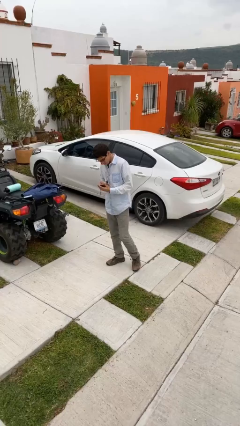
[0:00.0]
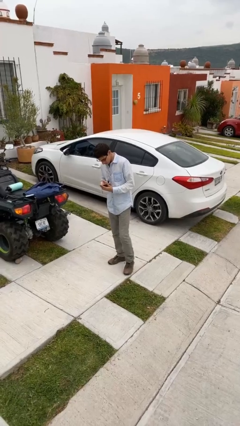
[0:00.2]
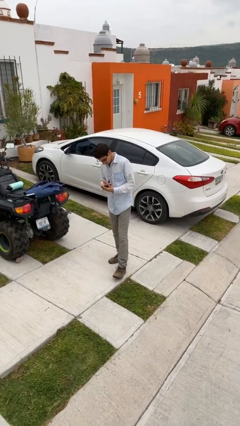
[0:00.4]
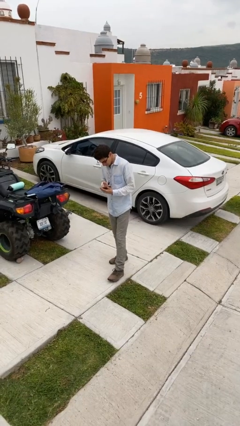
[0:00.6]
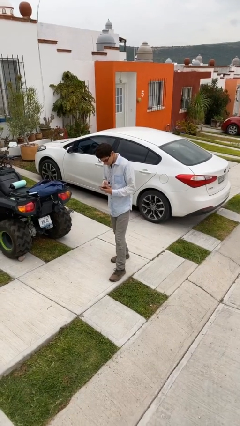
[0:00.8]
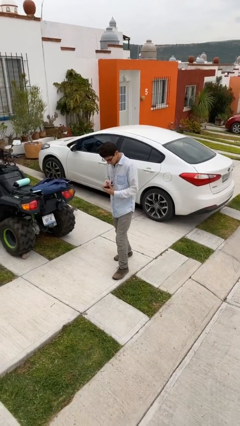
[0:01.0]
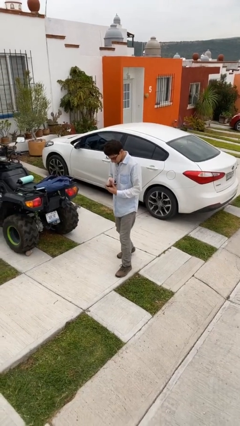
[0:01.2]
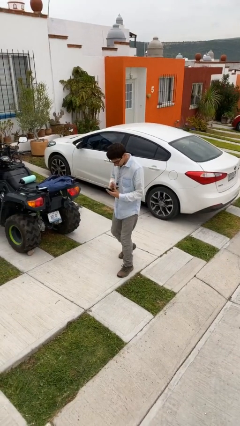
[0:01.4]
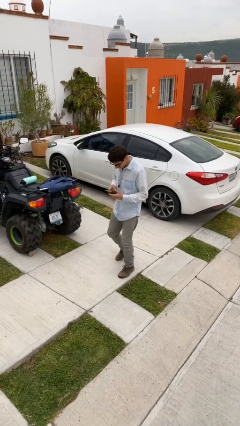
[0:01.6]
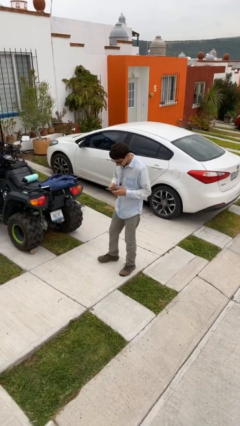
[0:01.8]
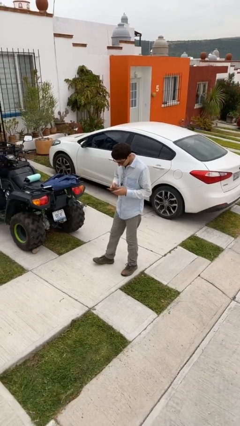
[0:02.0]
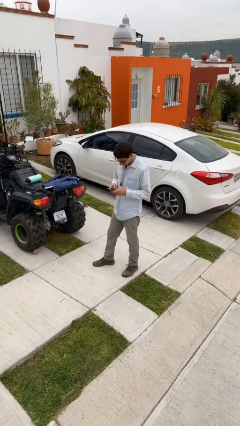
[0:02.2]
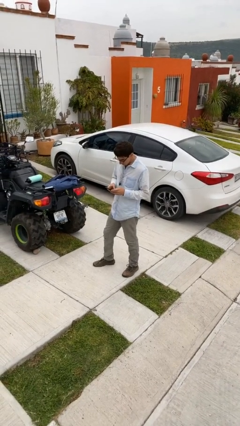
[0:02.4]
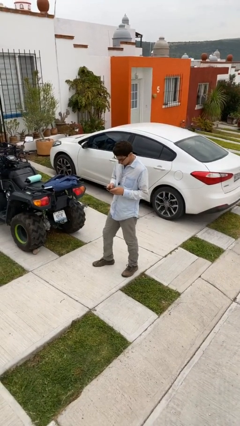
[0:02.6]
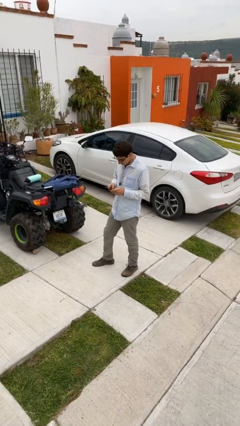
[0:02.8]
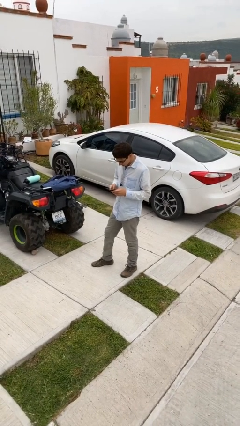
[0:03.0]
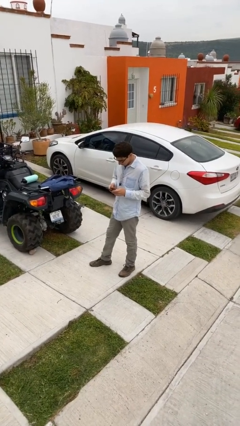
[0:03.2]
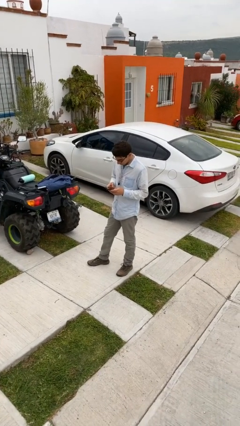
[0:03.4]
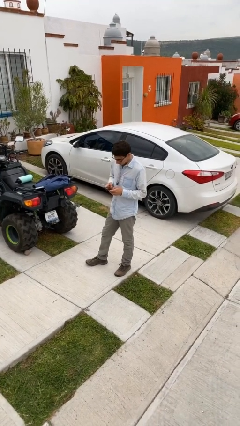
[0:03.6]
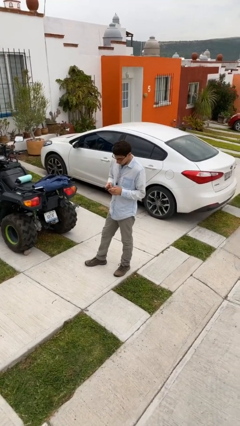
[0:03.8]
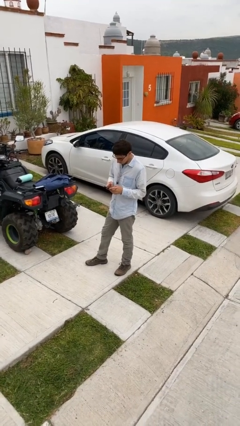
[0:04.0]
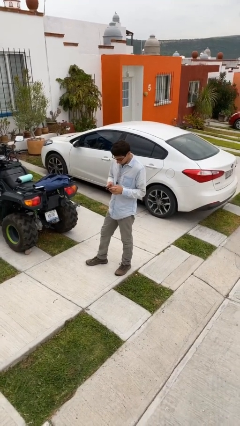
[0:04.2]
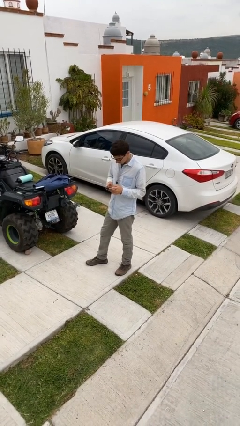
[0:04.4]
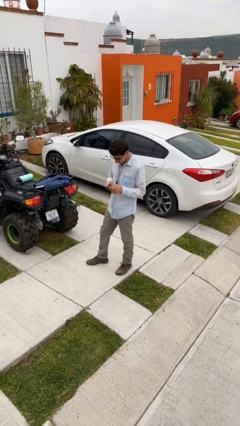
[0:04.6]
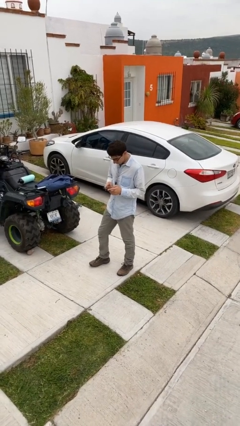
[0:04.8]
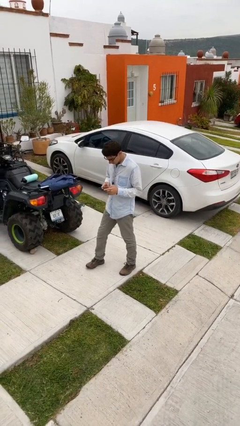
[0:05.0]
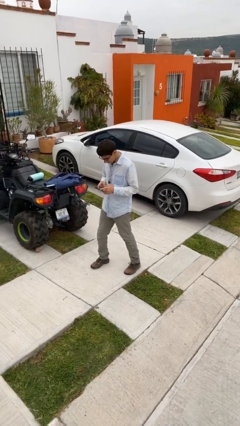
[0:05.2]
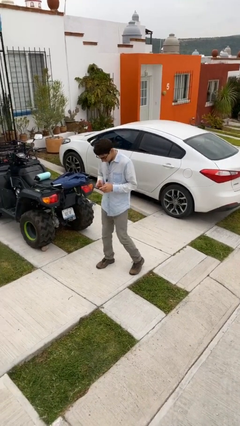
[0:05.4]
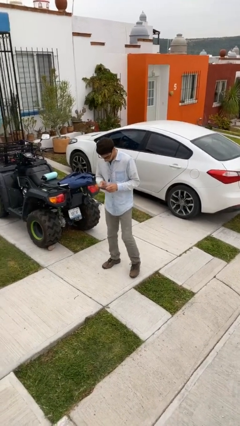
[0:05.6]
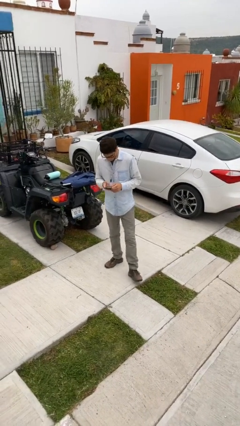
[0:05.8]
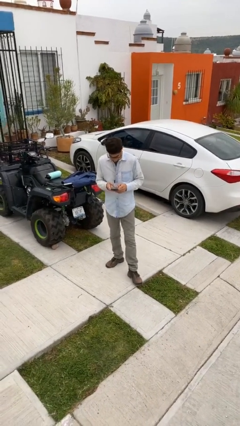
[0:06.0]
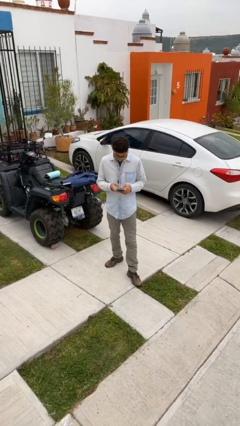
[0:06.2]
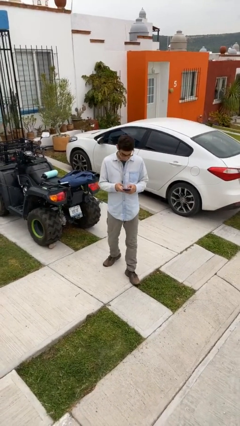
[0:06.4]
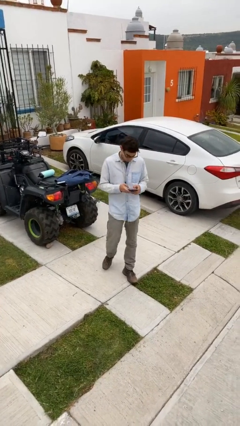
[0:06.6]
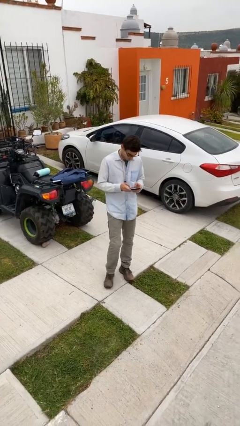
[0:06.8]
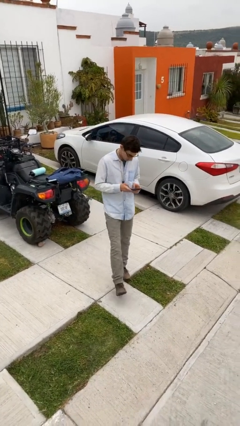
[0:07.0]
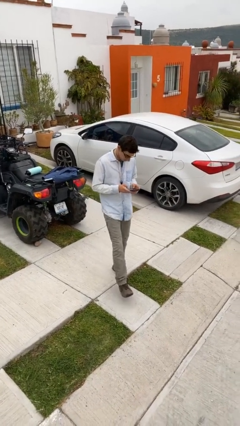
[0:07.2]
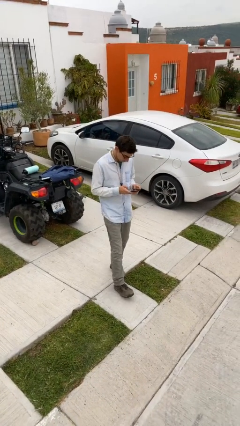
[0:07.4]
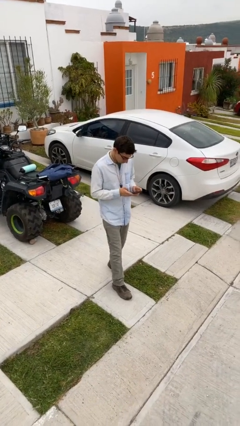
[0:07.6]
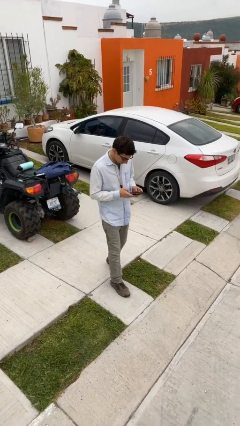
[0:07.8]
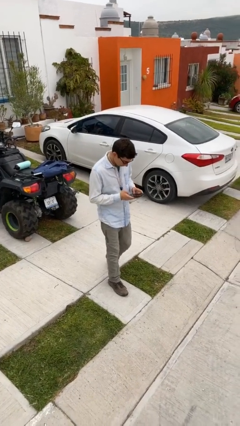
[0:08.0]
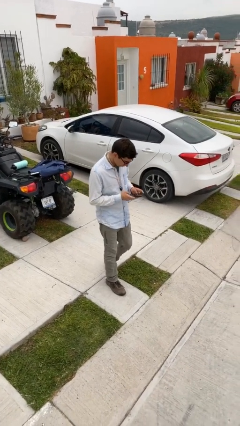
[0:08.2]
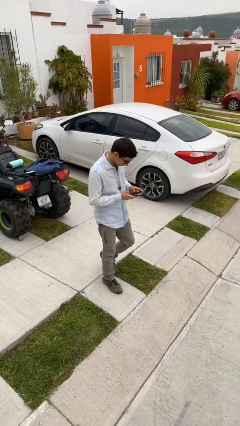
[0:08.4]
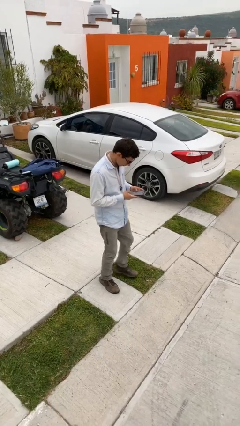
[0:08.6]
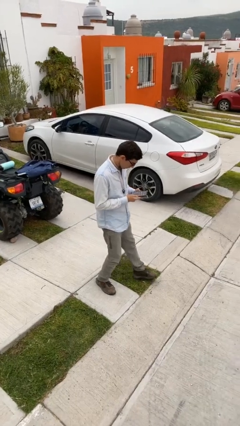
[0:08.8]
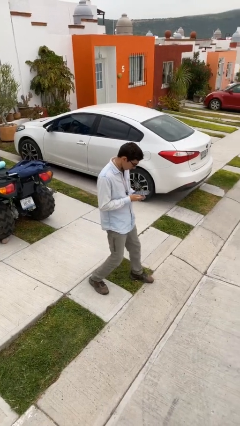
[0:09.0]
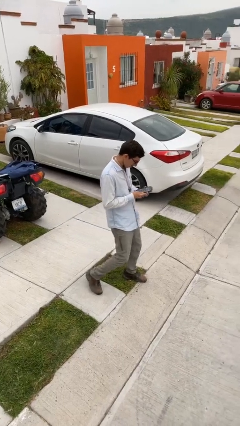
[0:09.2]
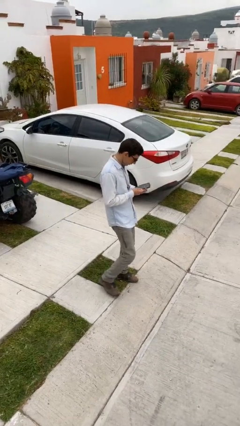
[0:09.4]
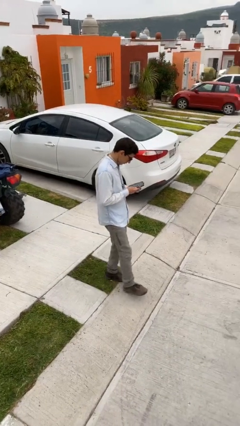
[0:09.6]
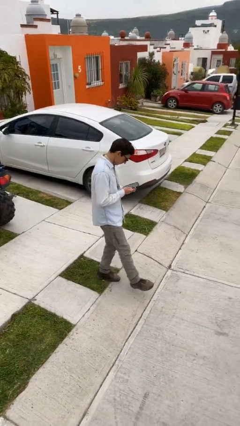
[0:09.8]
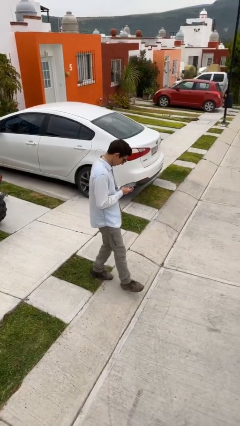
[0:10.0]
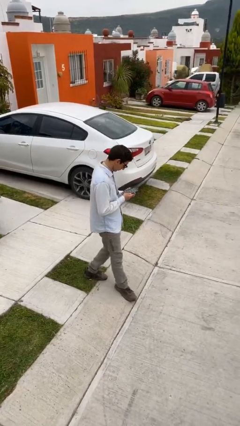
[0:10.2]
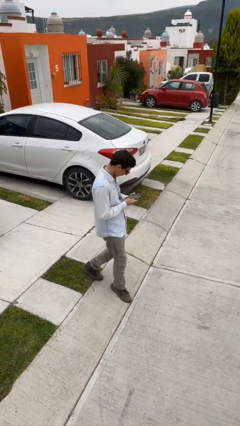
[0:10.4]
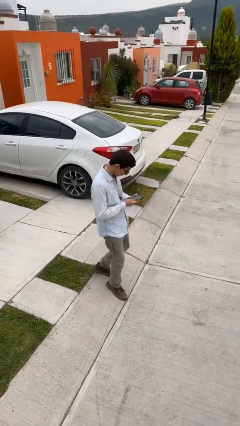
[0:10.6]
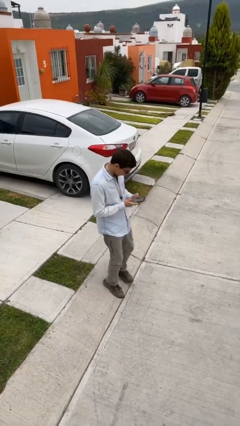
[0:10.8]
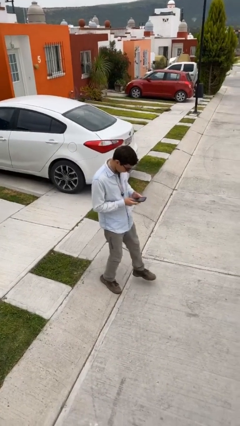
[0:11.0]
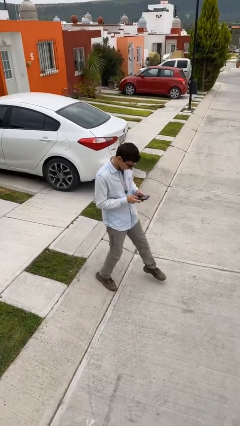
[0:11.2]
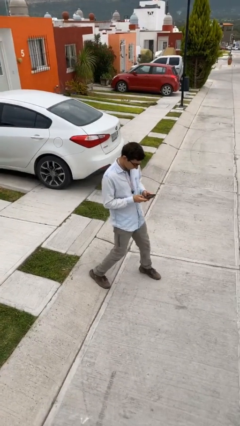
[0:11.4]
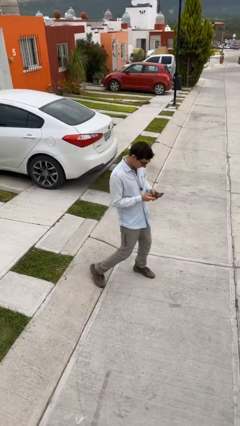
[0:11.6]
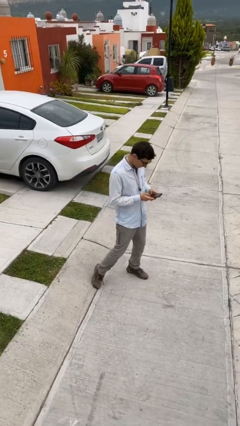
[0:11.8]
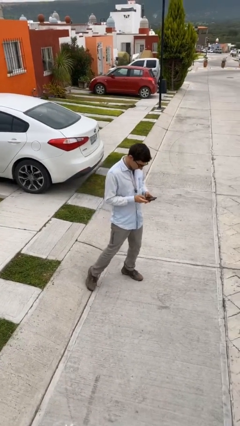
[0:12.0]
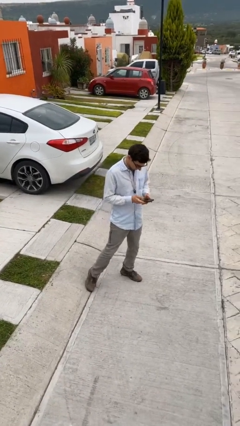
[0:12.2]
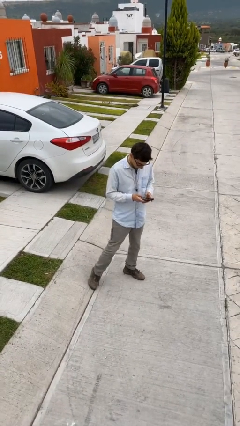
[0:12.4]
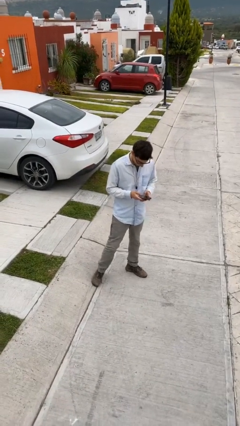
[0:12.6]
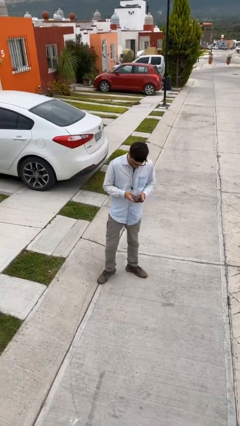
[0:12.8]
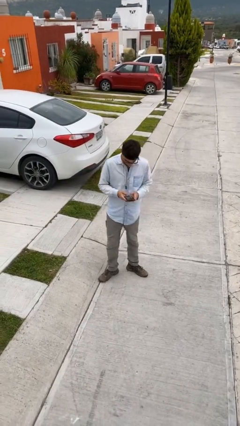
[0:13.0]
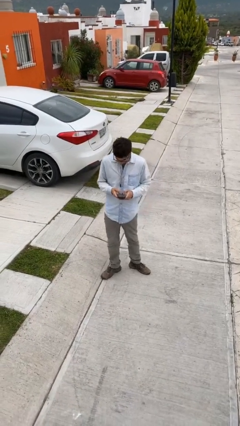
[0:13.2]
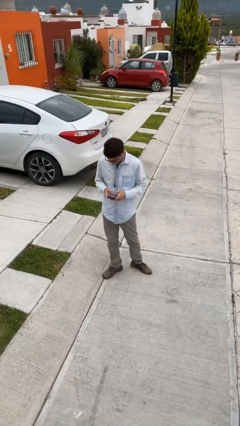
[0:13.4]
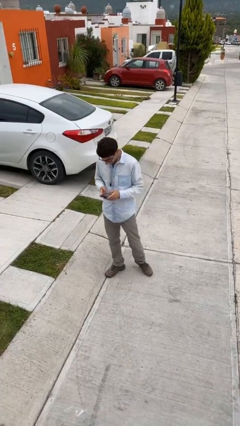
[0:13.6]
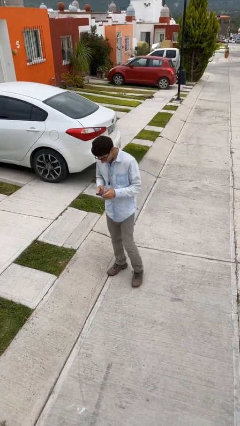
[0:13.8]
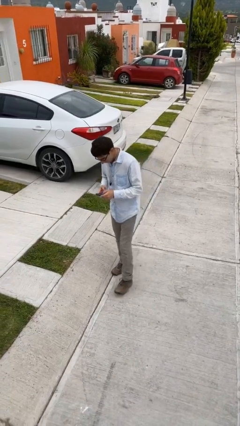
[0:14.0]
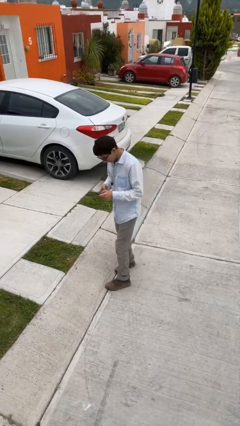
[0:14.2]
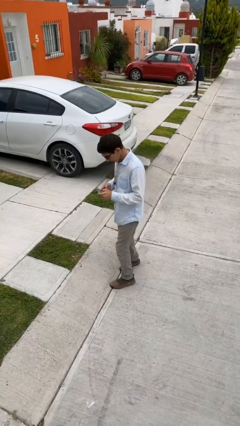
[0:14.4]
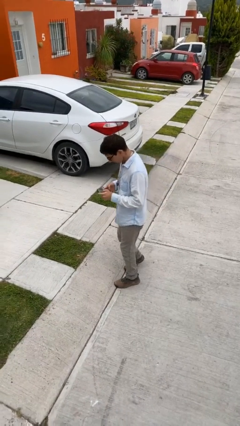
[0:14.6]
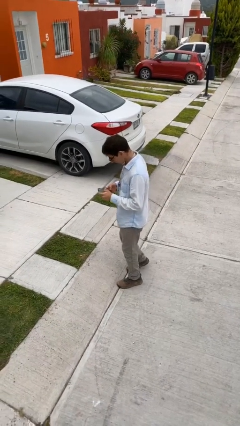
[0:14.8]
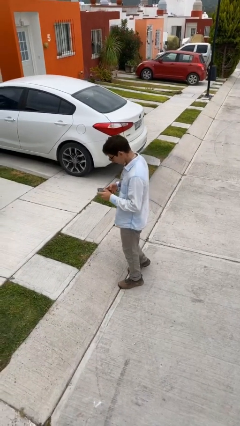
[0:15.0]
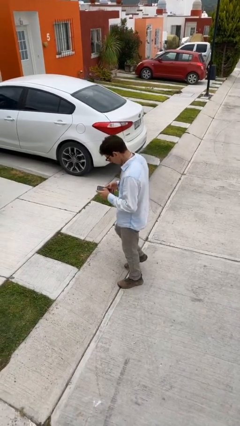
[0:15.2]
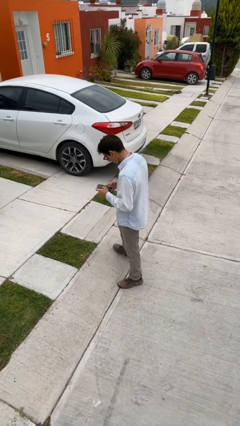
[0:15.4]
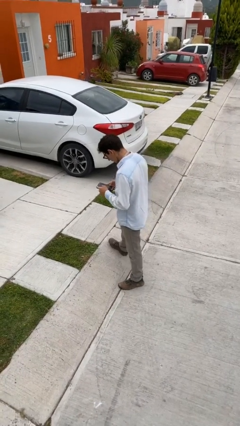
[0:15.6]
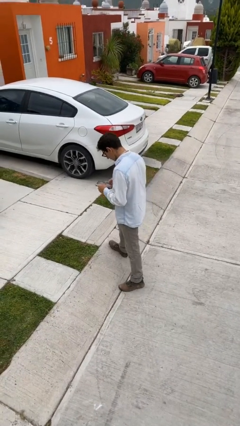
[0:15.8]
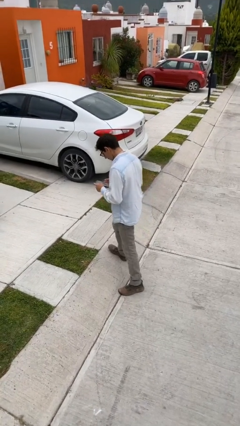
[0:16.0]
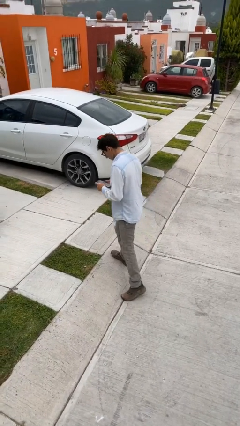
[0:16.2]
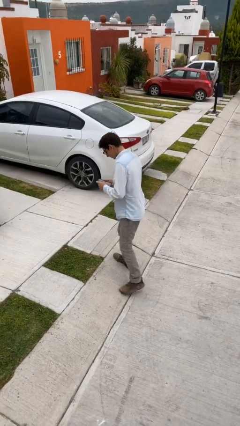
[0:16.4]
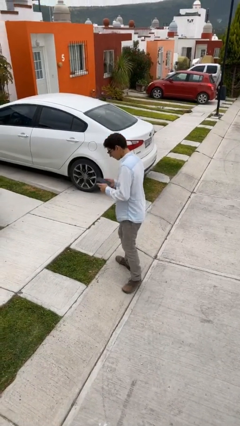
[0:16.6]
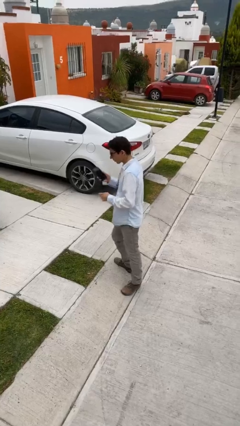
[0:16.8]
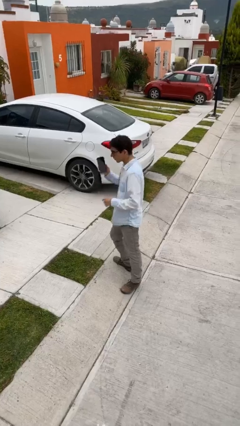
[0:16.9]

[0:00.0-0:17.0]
person texts on phone

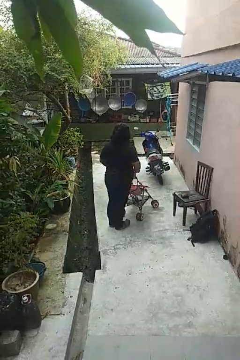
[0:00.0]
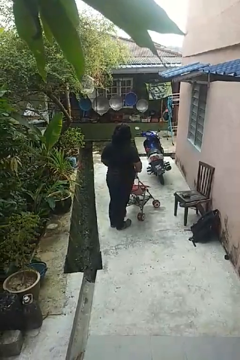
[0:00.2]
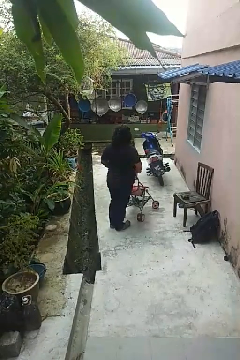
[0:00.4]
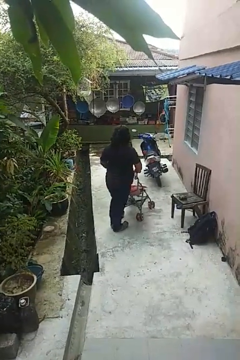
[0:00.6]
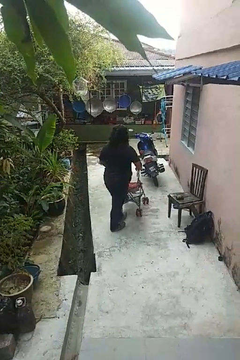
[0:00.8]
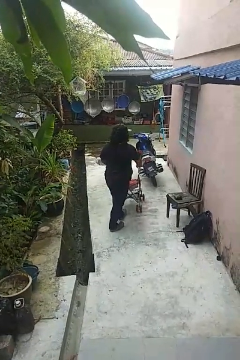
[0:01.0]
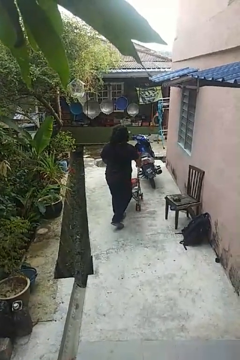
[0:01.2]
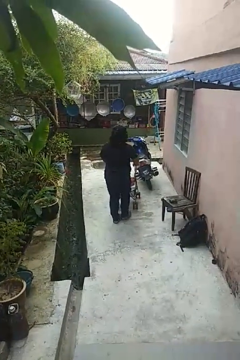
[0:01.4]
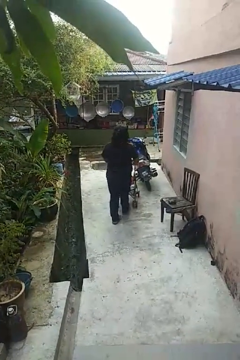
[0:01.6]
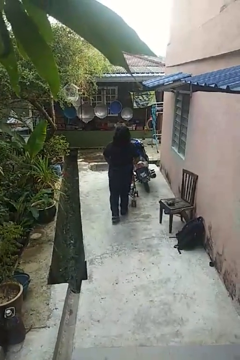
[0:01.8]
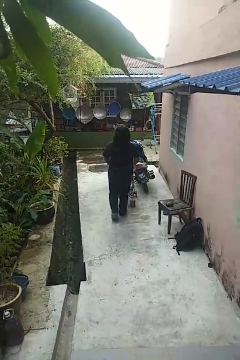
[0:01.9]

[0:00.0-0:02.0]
person pushes wheeled cart

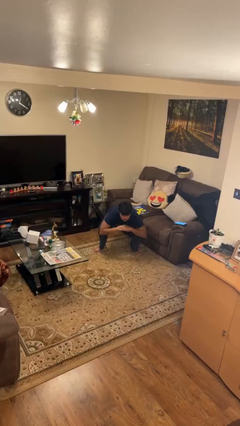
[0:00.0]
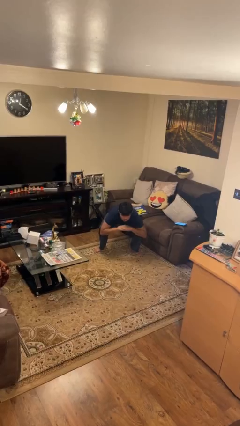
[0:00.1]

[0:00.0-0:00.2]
person stands up
